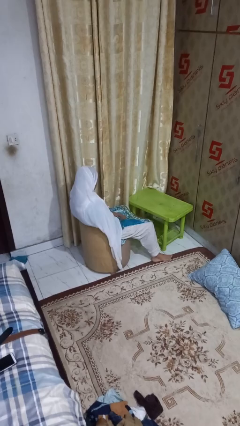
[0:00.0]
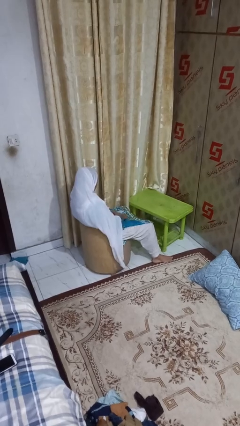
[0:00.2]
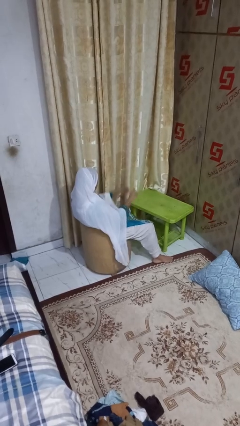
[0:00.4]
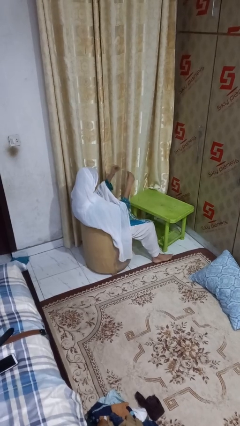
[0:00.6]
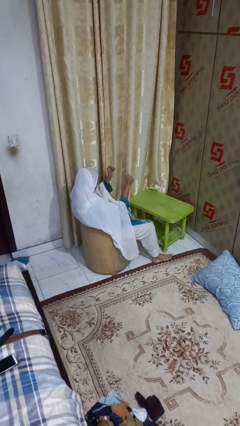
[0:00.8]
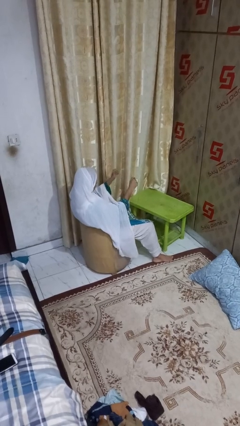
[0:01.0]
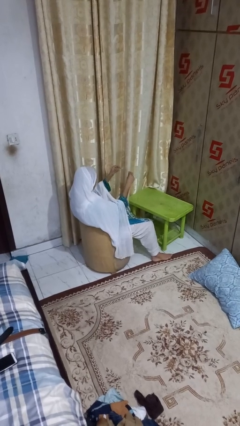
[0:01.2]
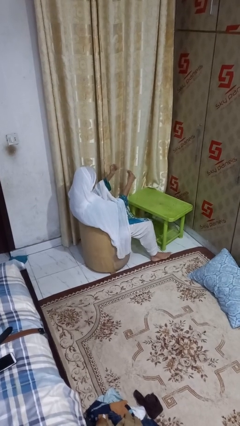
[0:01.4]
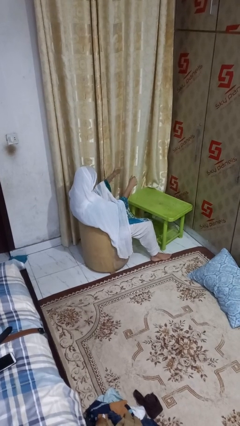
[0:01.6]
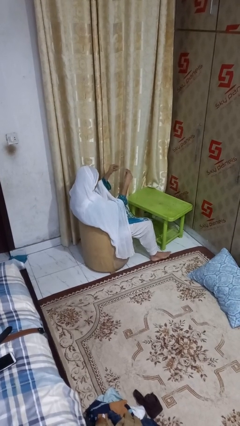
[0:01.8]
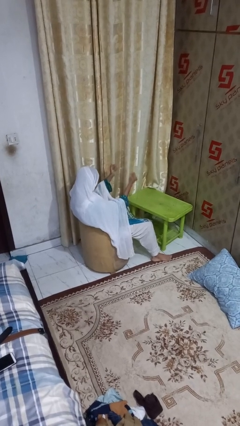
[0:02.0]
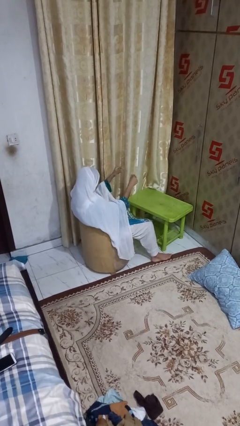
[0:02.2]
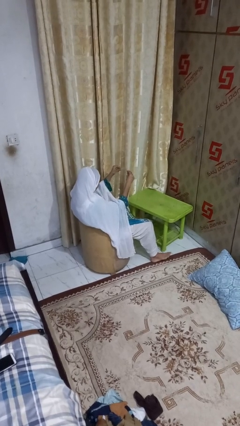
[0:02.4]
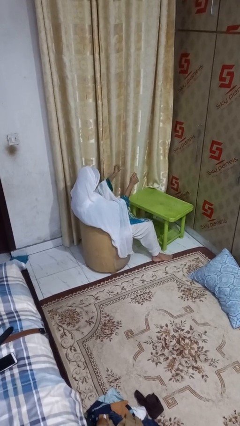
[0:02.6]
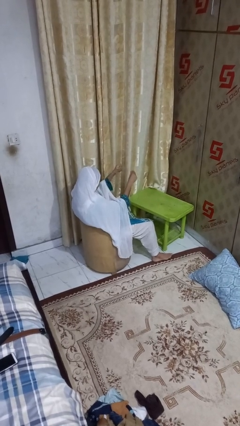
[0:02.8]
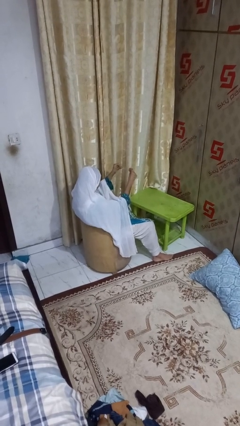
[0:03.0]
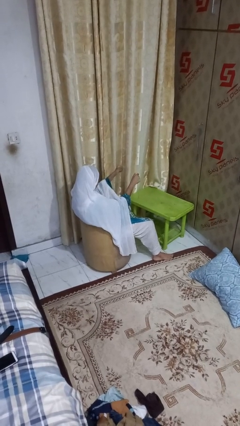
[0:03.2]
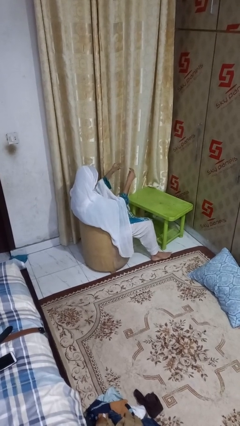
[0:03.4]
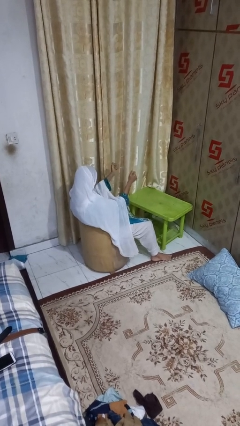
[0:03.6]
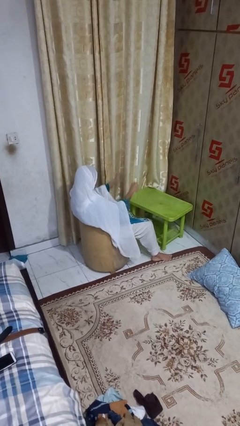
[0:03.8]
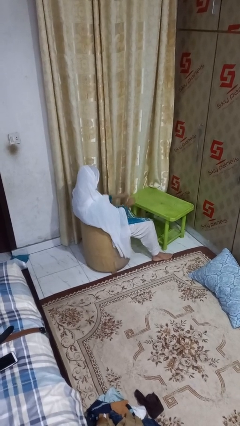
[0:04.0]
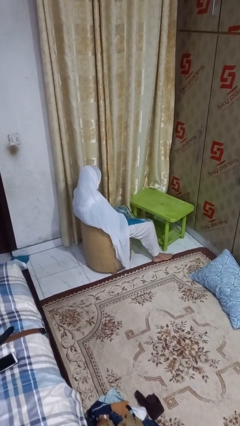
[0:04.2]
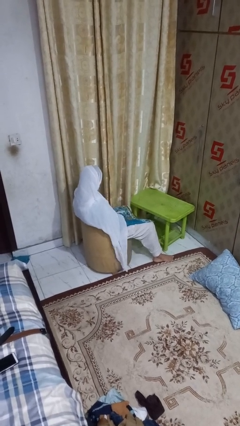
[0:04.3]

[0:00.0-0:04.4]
person snaps fingers

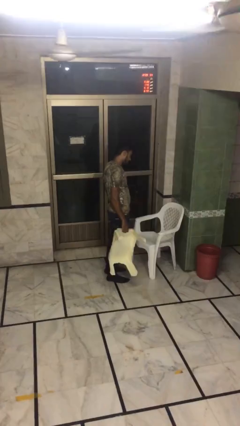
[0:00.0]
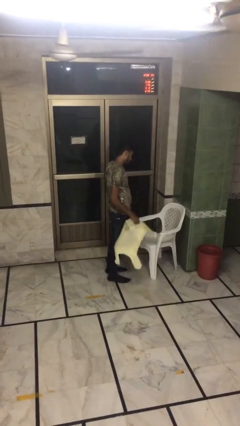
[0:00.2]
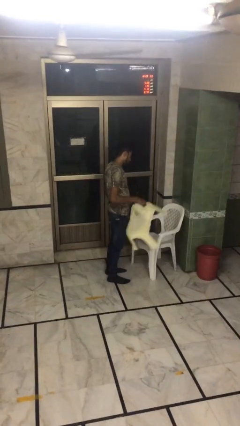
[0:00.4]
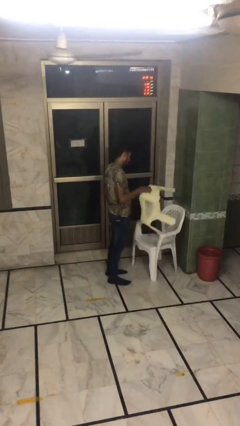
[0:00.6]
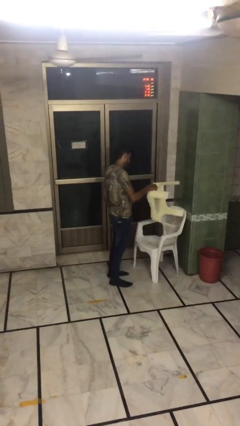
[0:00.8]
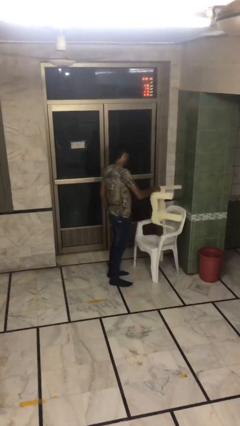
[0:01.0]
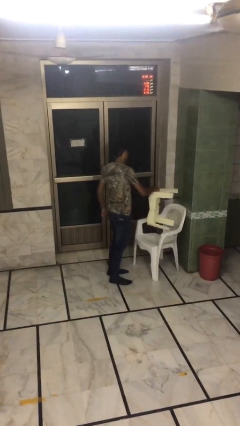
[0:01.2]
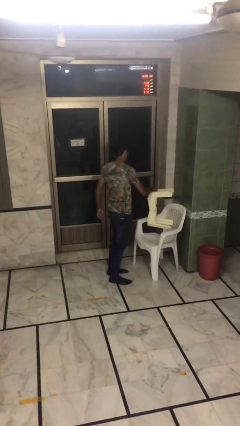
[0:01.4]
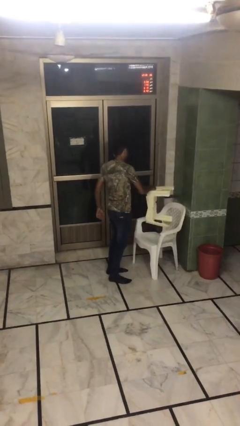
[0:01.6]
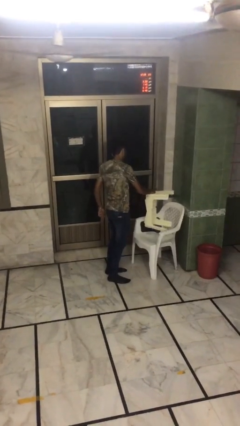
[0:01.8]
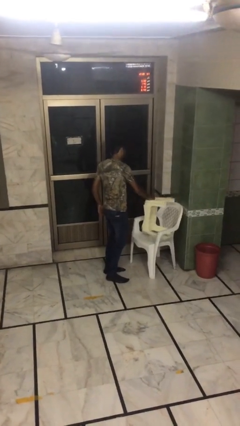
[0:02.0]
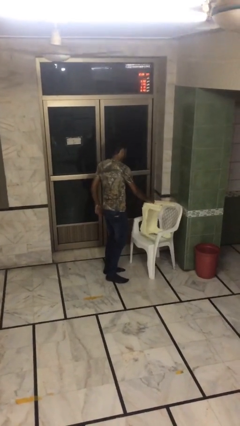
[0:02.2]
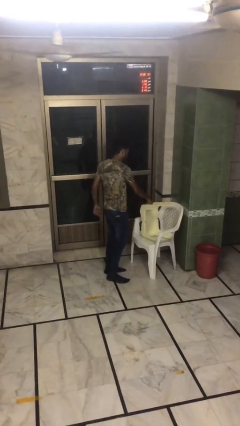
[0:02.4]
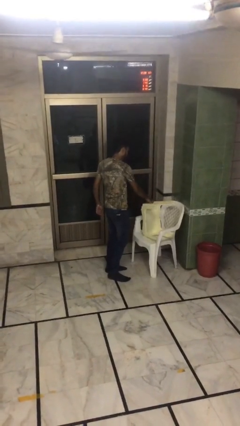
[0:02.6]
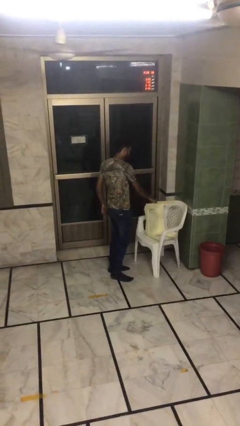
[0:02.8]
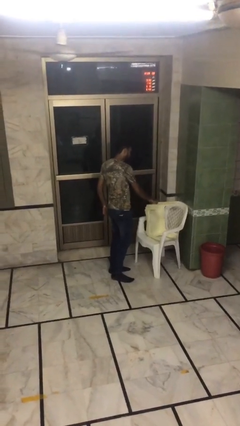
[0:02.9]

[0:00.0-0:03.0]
person puts down object on table

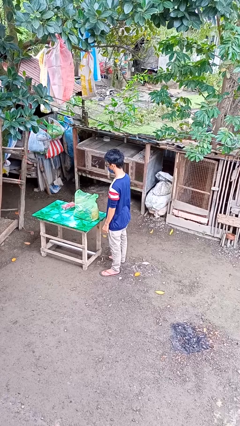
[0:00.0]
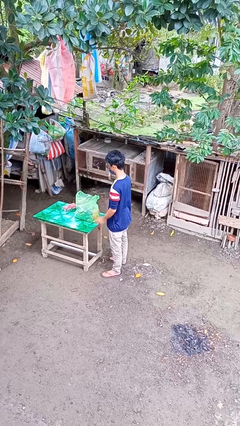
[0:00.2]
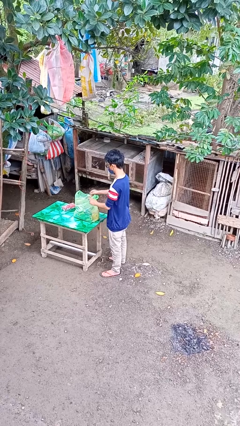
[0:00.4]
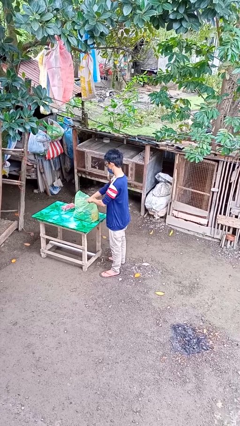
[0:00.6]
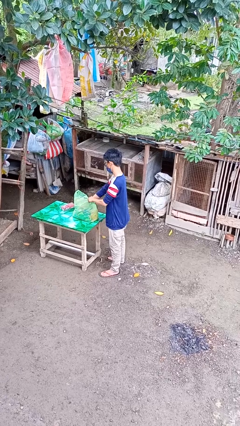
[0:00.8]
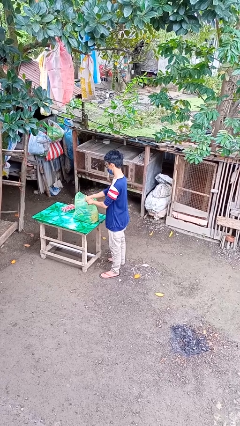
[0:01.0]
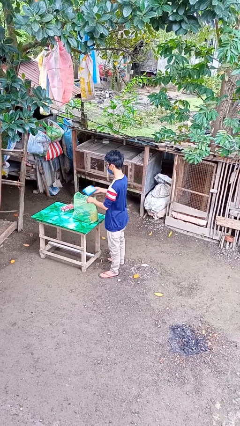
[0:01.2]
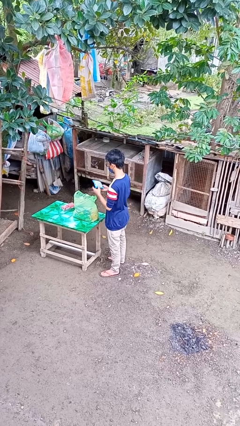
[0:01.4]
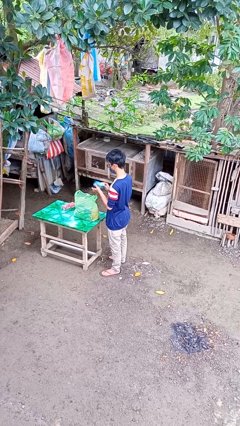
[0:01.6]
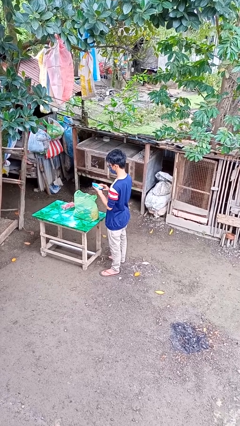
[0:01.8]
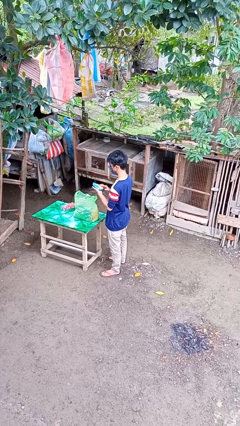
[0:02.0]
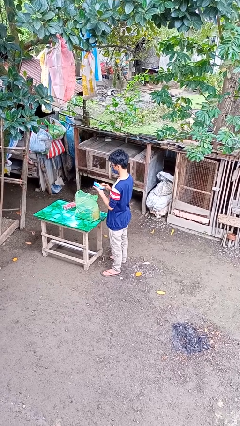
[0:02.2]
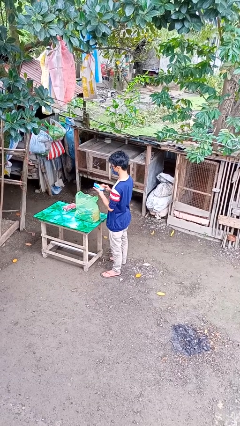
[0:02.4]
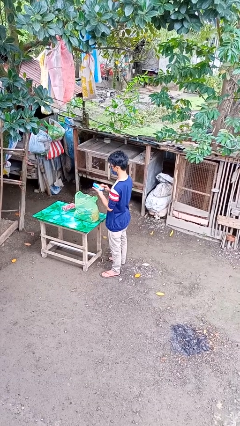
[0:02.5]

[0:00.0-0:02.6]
person takes object from bag

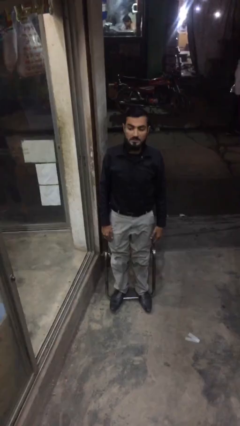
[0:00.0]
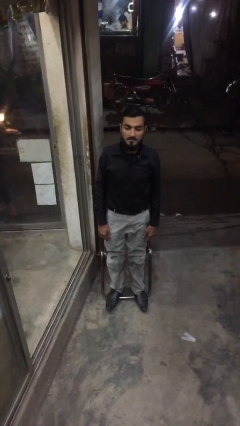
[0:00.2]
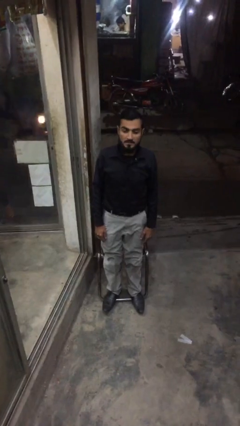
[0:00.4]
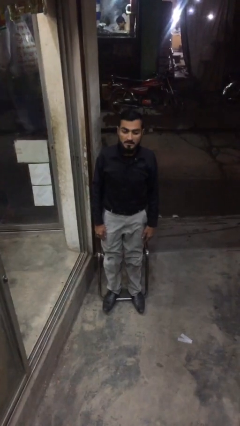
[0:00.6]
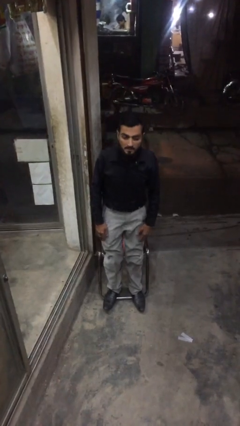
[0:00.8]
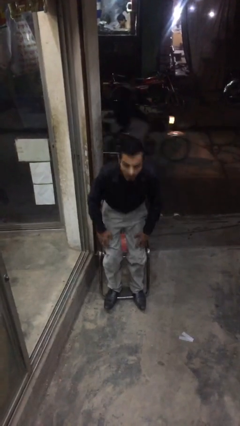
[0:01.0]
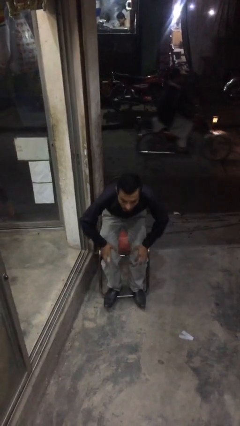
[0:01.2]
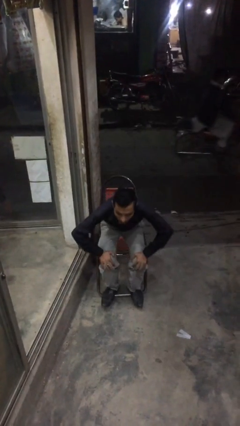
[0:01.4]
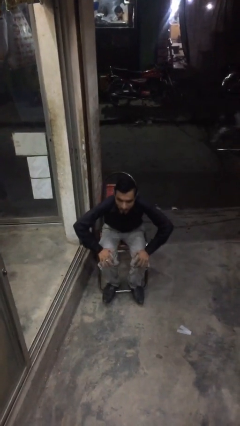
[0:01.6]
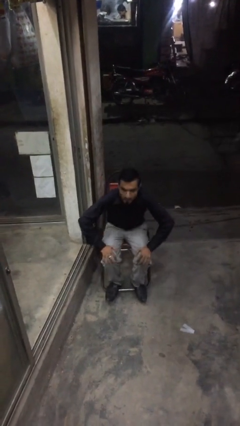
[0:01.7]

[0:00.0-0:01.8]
person sits down

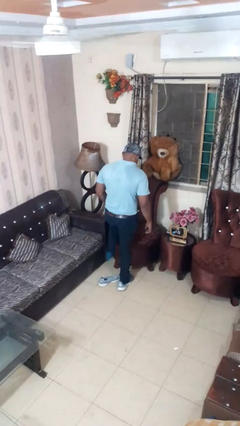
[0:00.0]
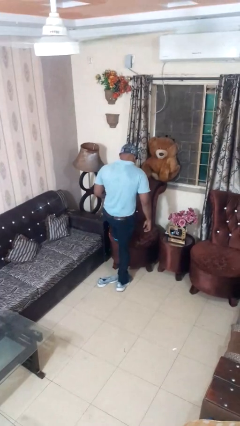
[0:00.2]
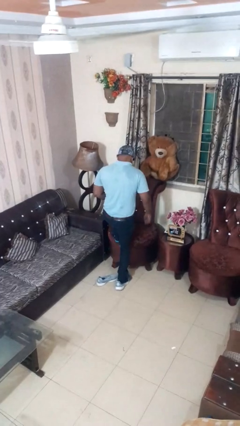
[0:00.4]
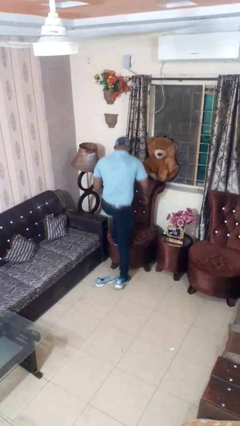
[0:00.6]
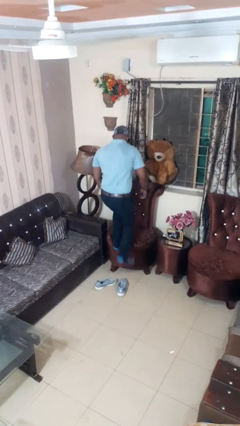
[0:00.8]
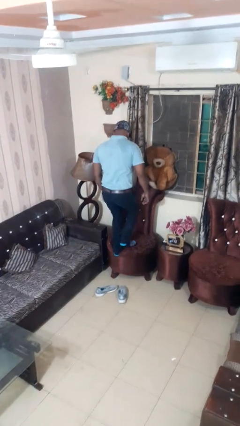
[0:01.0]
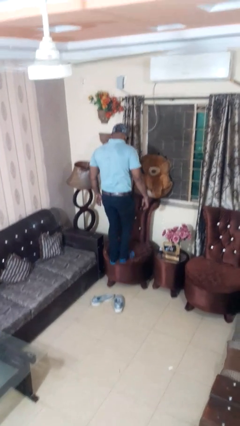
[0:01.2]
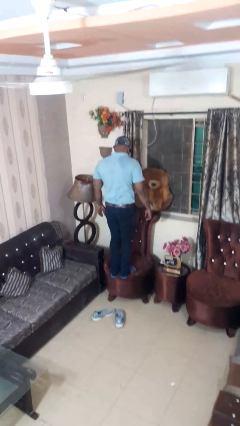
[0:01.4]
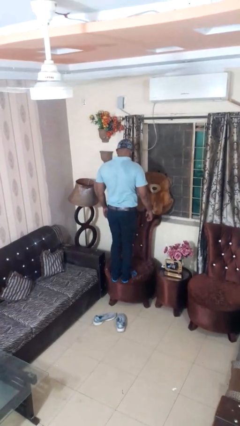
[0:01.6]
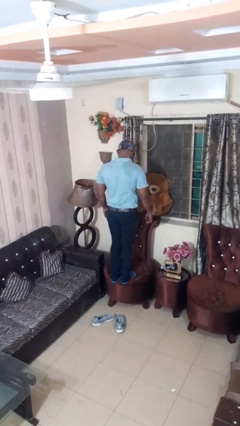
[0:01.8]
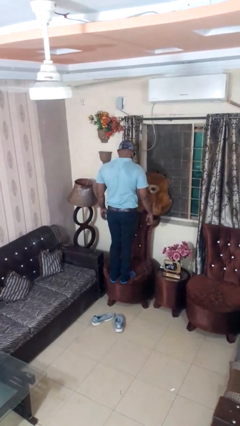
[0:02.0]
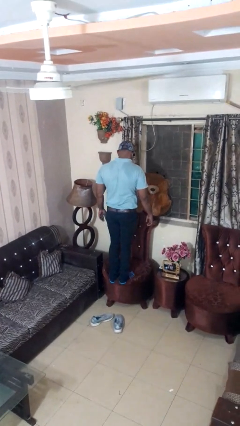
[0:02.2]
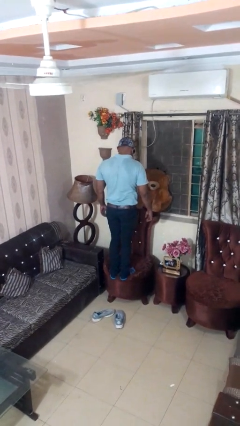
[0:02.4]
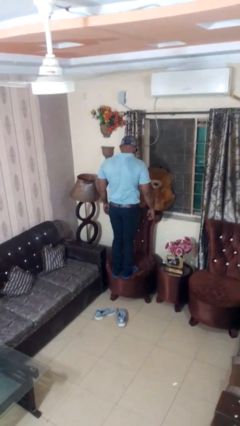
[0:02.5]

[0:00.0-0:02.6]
person climbs on chair

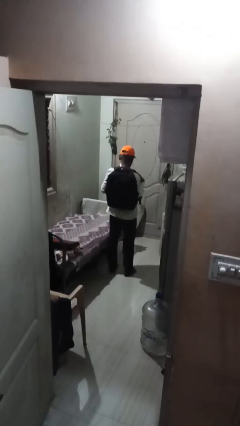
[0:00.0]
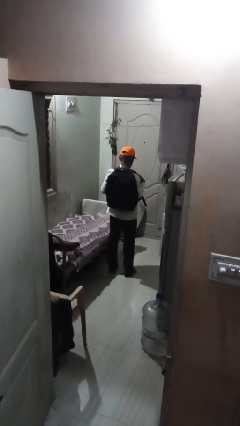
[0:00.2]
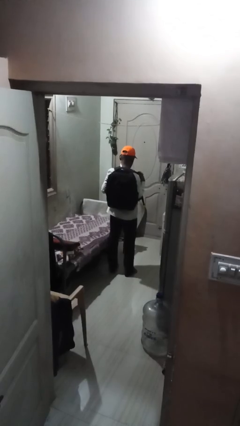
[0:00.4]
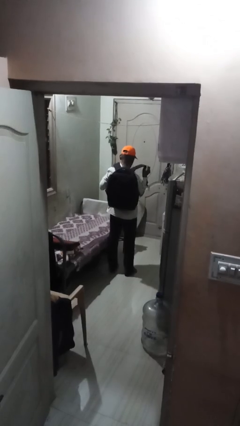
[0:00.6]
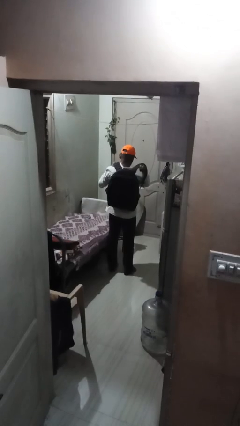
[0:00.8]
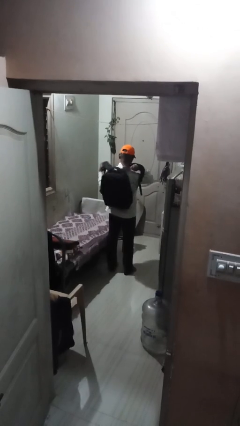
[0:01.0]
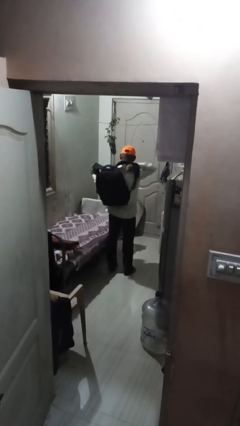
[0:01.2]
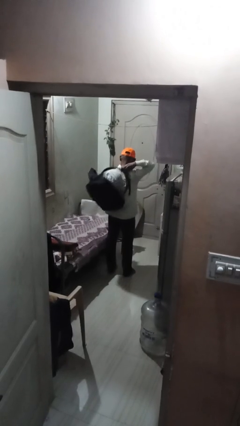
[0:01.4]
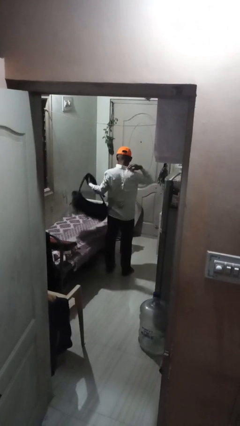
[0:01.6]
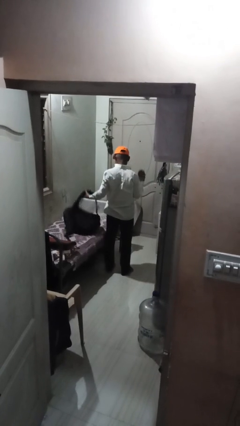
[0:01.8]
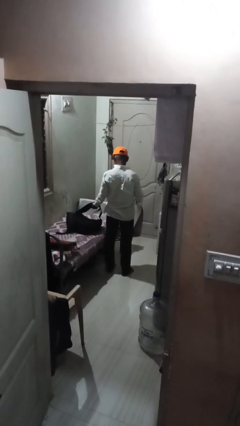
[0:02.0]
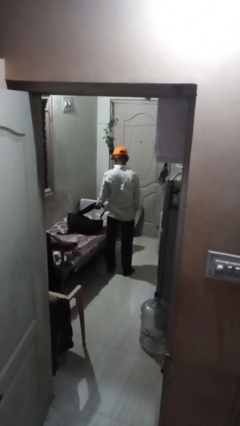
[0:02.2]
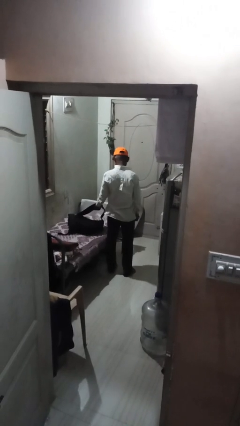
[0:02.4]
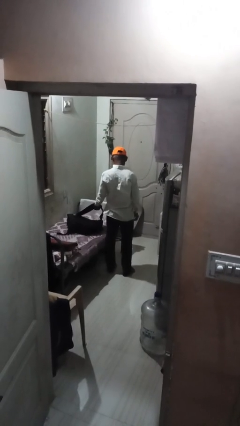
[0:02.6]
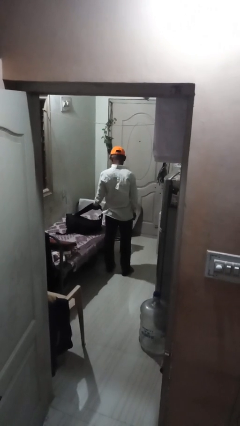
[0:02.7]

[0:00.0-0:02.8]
person takes off backpack

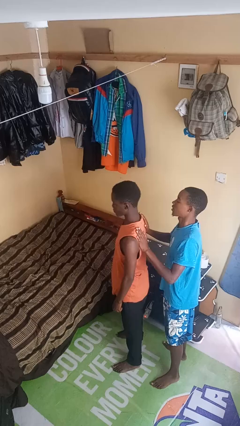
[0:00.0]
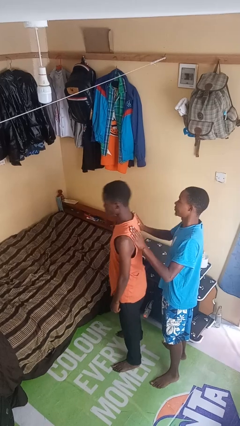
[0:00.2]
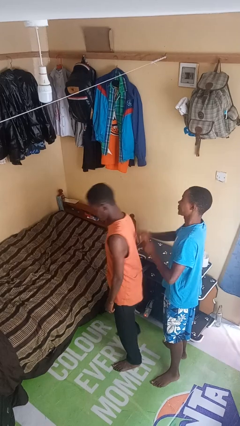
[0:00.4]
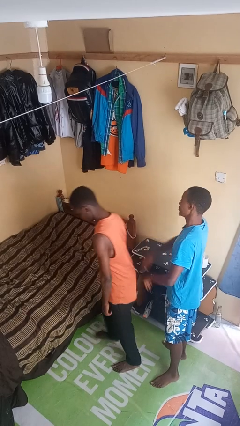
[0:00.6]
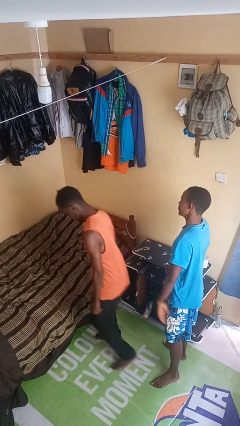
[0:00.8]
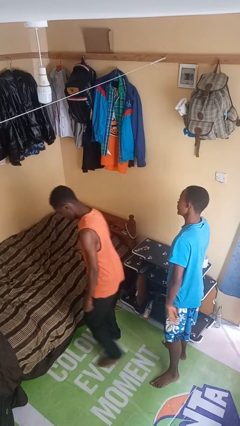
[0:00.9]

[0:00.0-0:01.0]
person shoves person
